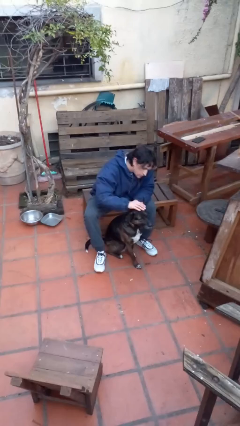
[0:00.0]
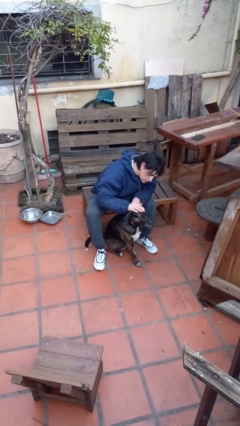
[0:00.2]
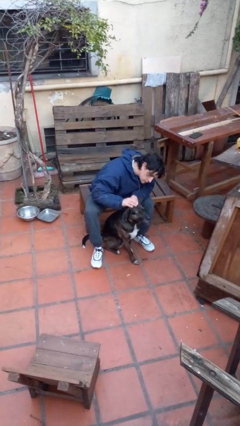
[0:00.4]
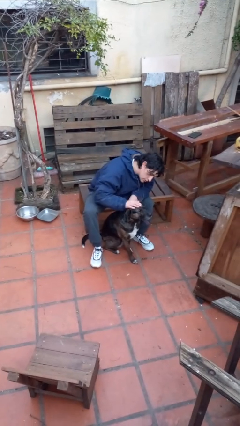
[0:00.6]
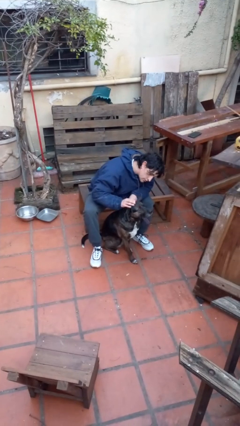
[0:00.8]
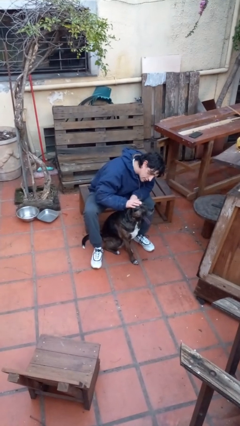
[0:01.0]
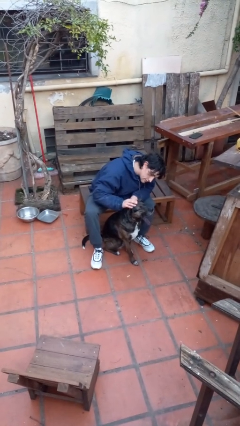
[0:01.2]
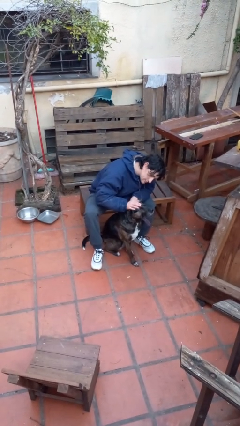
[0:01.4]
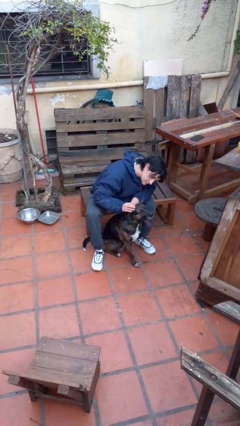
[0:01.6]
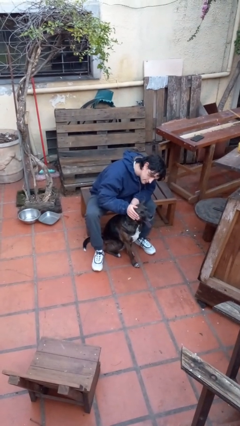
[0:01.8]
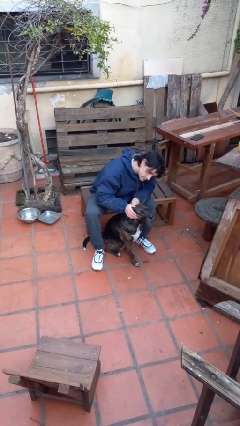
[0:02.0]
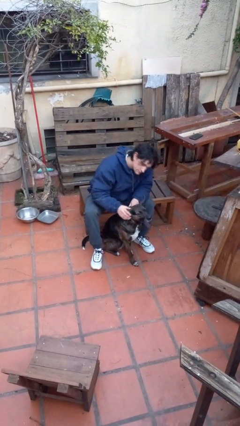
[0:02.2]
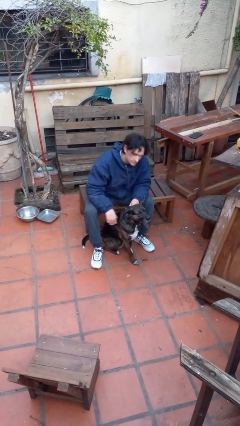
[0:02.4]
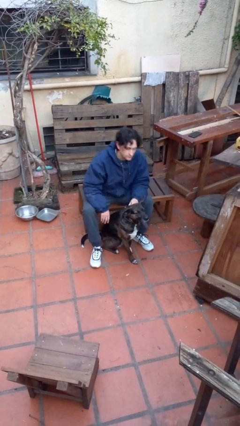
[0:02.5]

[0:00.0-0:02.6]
person pets dog

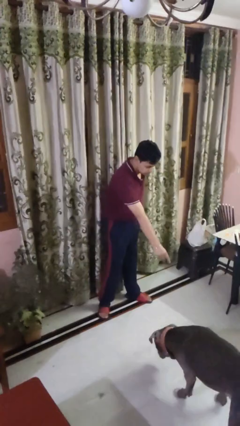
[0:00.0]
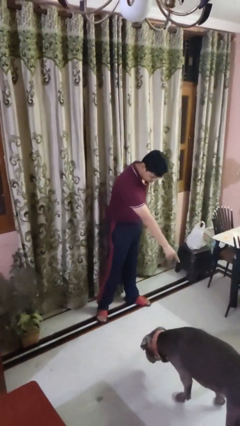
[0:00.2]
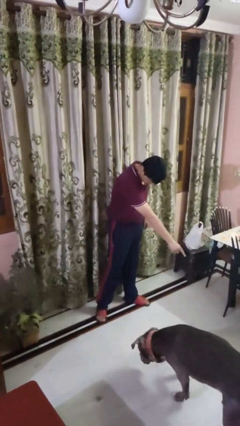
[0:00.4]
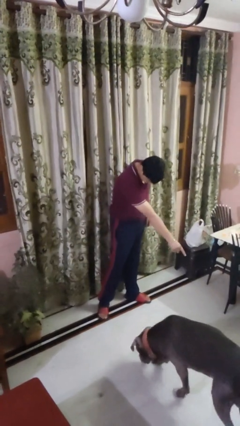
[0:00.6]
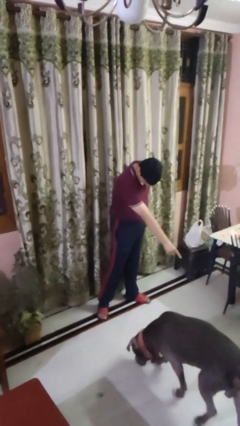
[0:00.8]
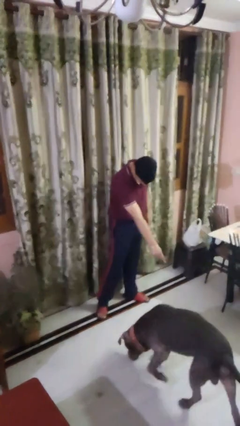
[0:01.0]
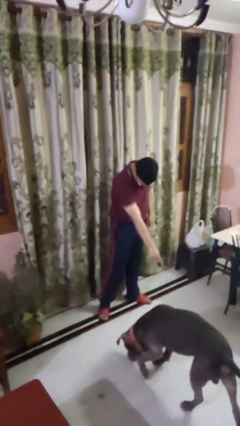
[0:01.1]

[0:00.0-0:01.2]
person points to dog

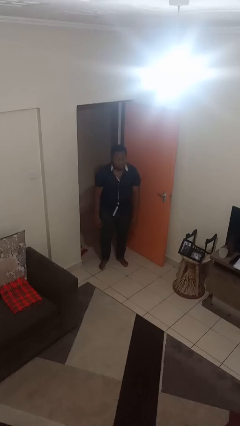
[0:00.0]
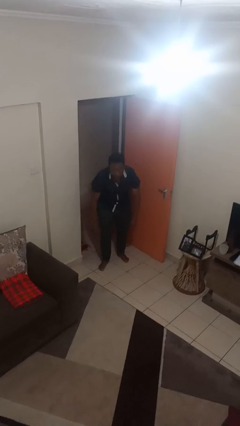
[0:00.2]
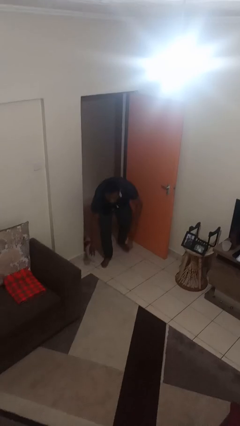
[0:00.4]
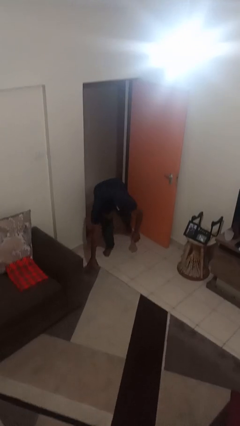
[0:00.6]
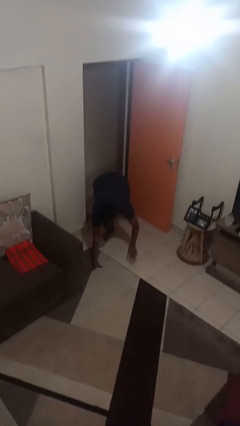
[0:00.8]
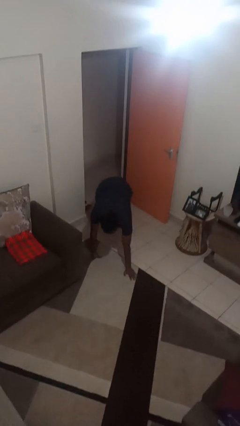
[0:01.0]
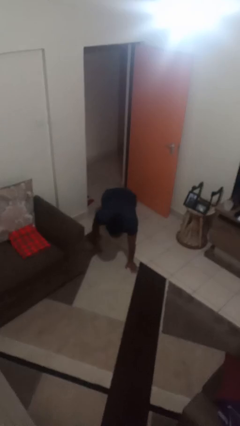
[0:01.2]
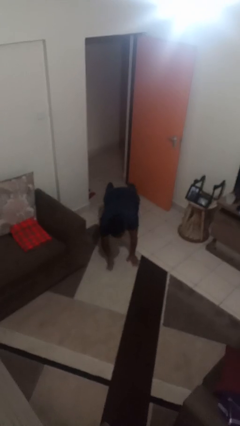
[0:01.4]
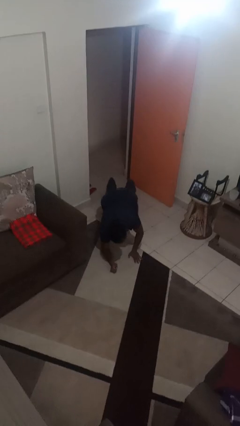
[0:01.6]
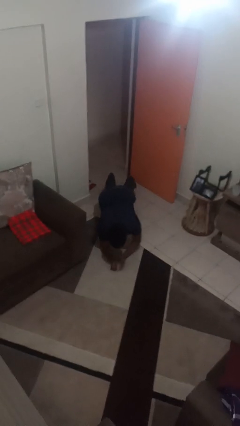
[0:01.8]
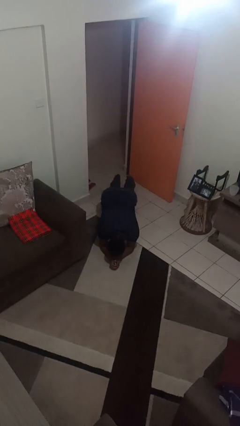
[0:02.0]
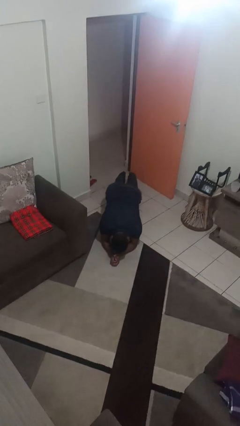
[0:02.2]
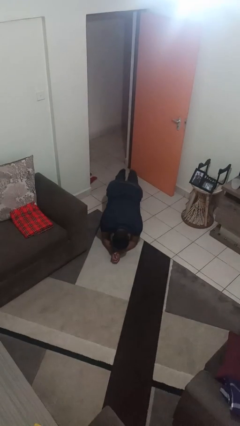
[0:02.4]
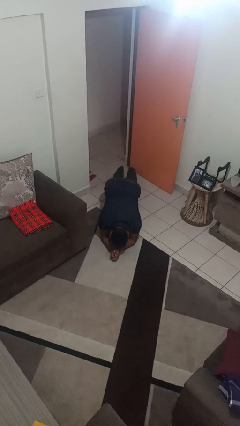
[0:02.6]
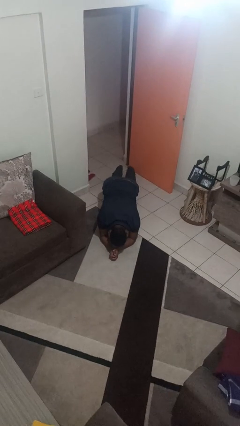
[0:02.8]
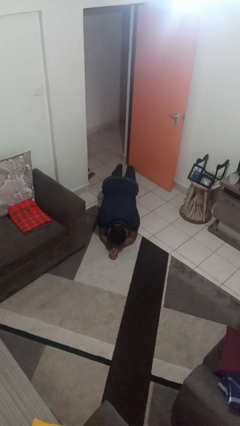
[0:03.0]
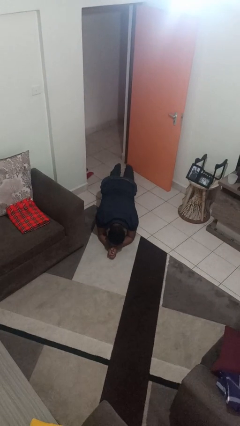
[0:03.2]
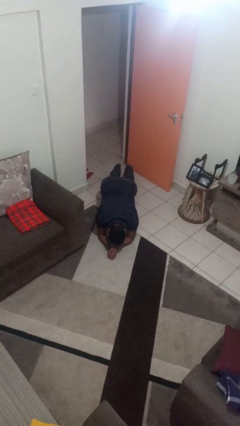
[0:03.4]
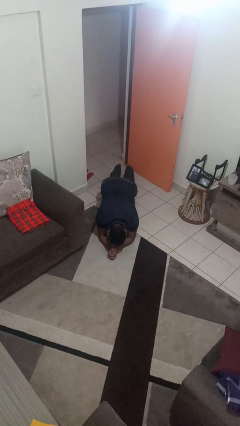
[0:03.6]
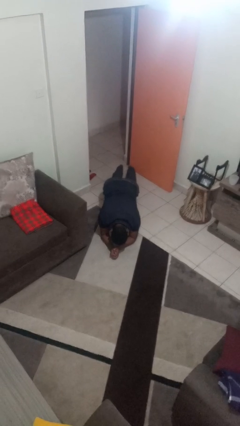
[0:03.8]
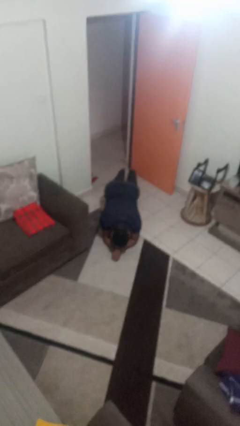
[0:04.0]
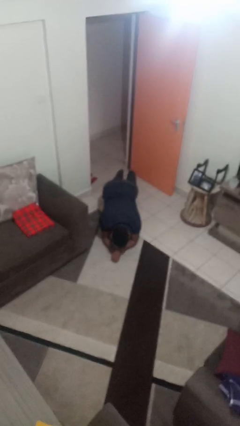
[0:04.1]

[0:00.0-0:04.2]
person exercises with plank

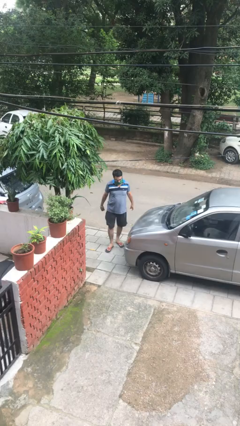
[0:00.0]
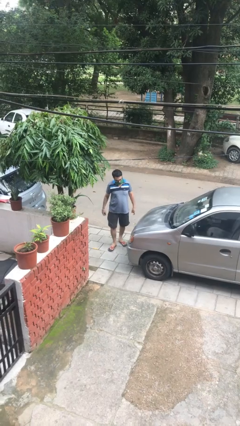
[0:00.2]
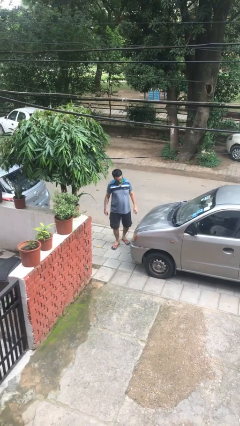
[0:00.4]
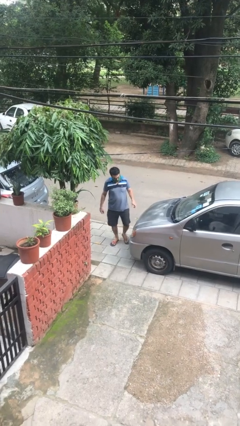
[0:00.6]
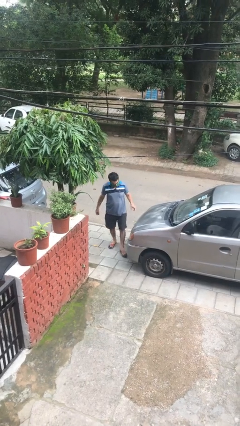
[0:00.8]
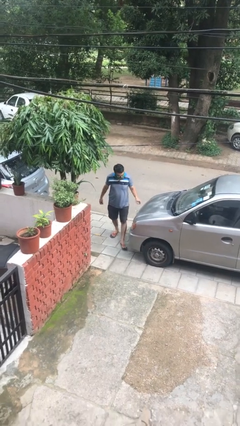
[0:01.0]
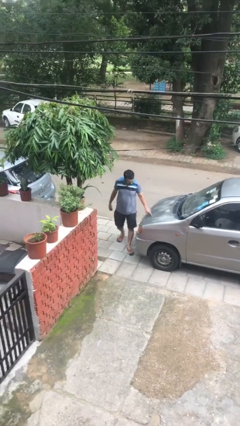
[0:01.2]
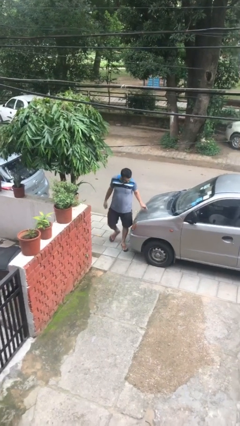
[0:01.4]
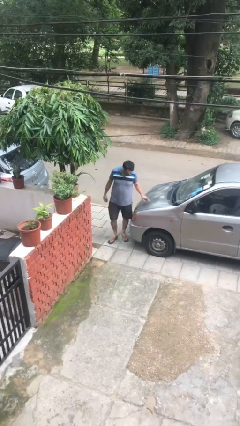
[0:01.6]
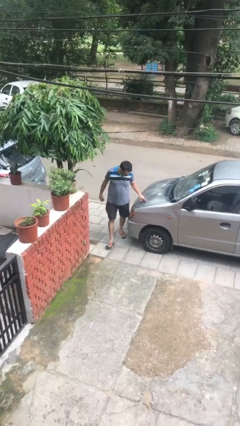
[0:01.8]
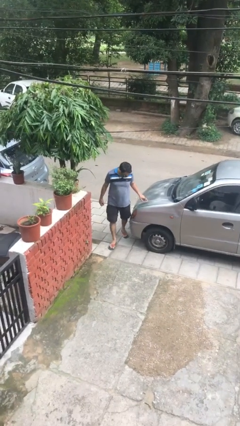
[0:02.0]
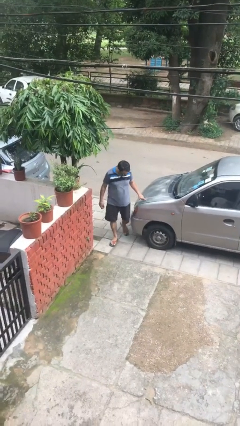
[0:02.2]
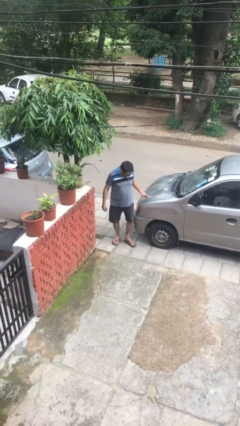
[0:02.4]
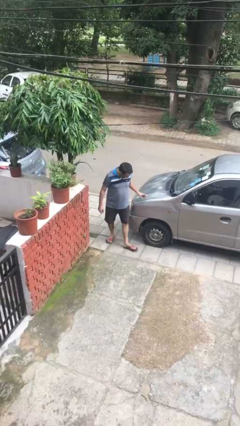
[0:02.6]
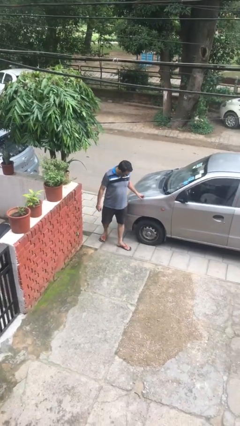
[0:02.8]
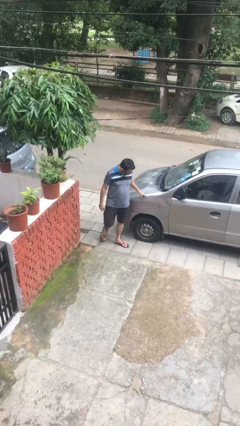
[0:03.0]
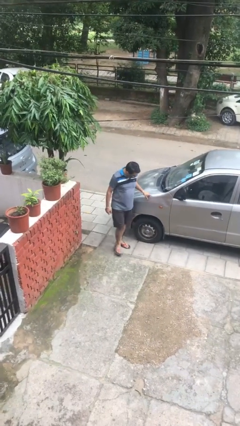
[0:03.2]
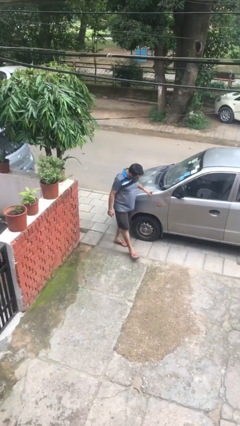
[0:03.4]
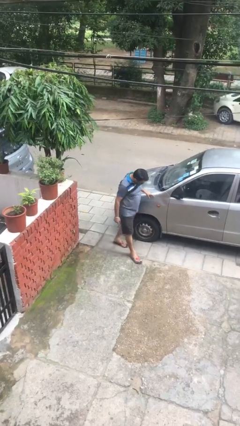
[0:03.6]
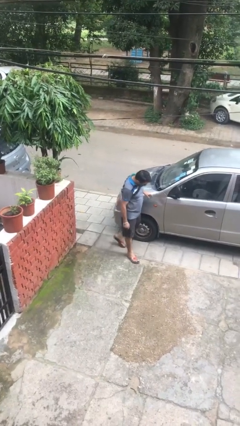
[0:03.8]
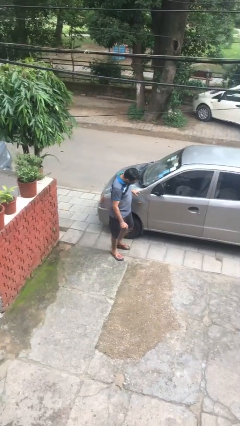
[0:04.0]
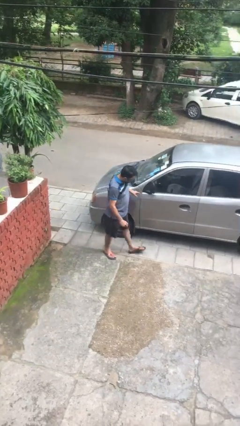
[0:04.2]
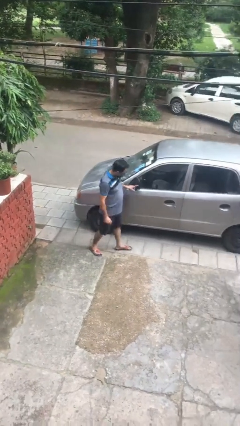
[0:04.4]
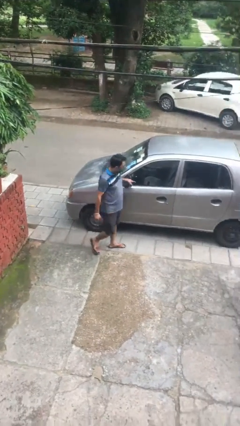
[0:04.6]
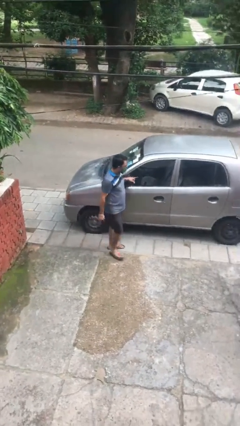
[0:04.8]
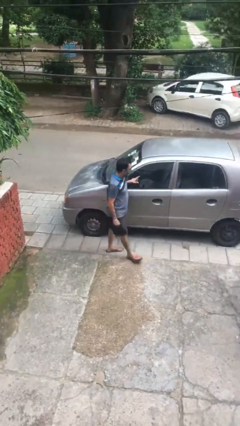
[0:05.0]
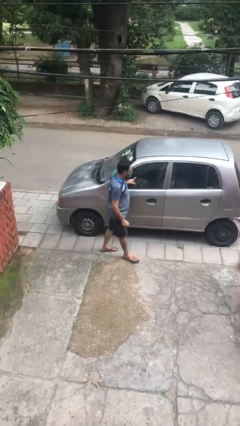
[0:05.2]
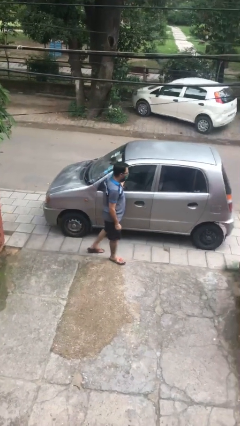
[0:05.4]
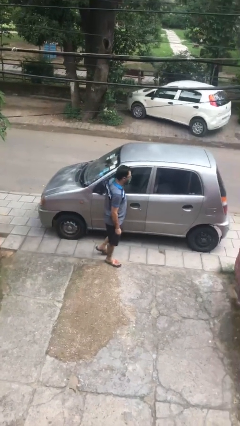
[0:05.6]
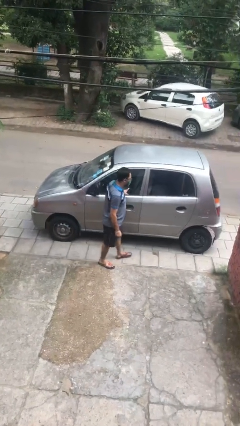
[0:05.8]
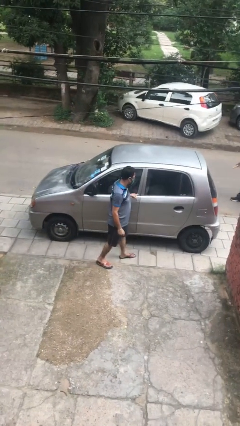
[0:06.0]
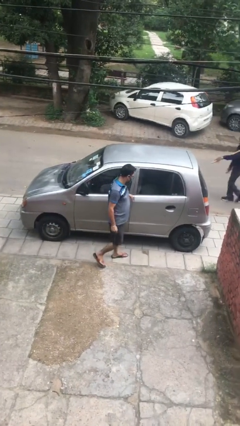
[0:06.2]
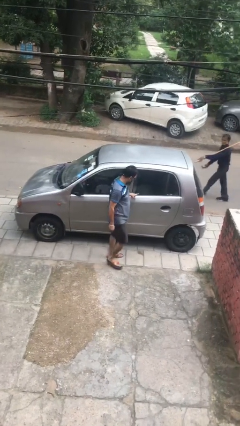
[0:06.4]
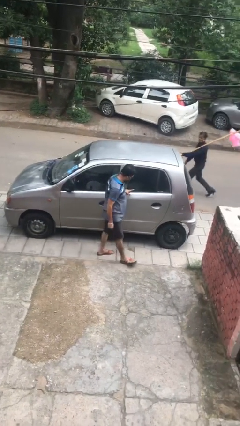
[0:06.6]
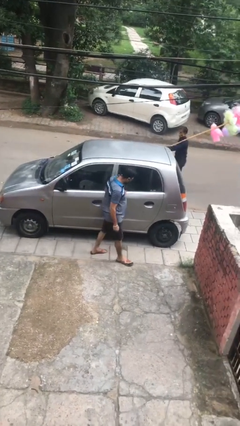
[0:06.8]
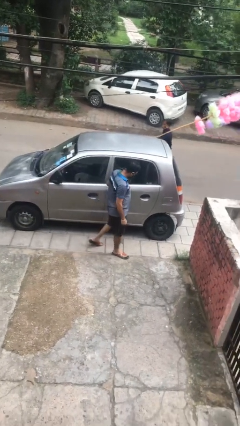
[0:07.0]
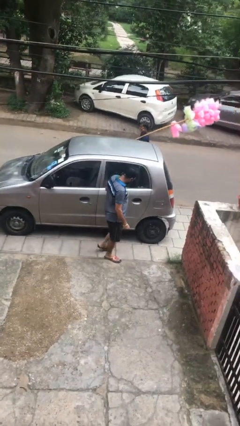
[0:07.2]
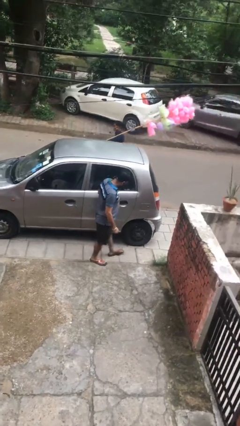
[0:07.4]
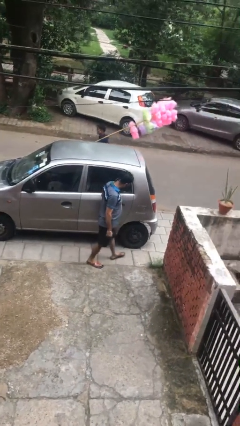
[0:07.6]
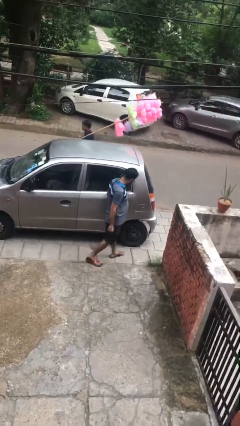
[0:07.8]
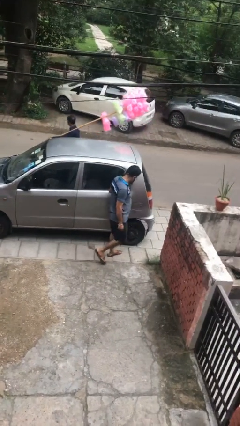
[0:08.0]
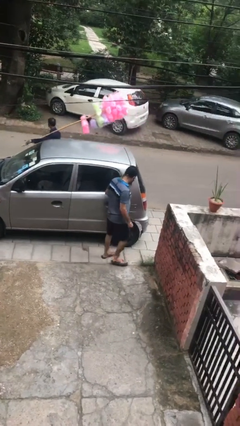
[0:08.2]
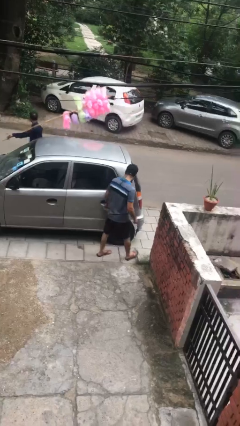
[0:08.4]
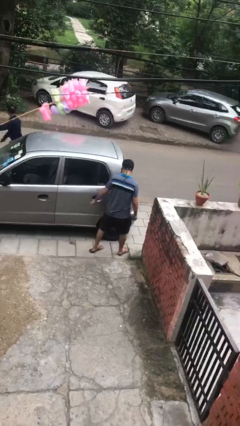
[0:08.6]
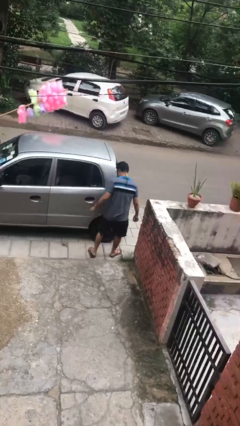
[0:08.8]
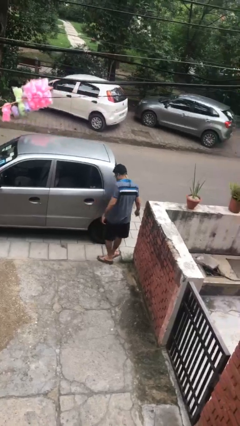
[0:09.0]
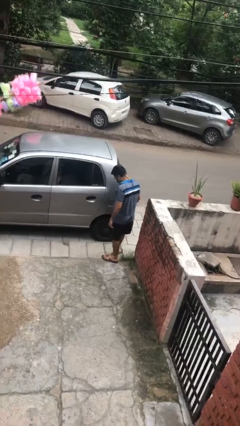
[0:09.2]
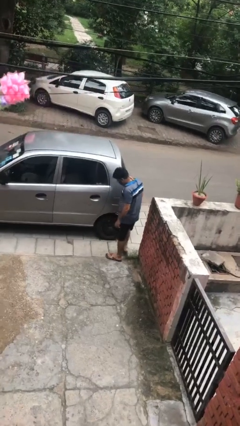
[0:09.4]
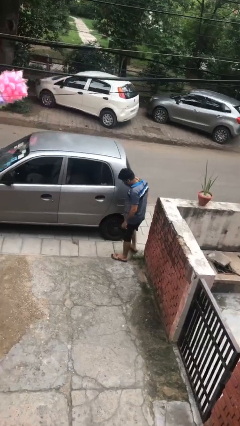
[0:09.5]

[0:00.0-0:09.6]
person walks around car

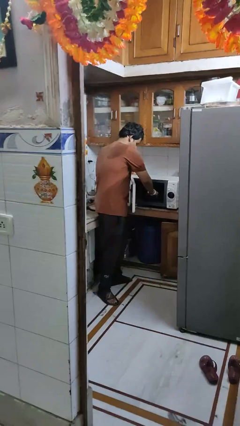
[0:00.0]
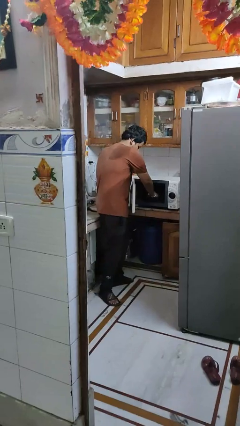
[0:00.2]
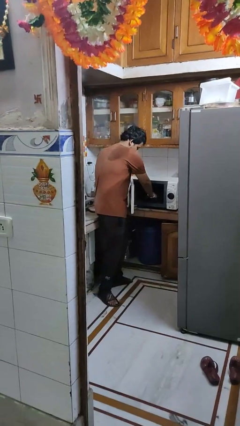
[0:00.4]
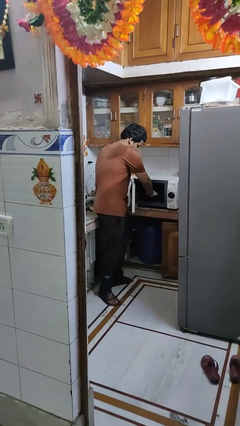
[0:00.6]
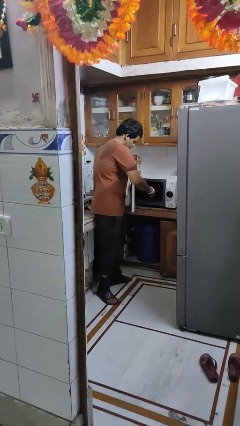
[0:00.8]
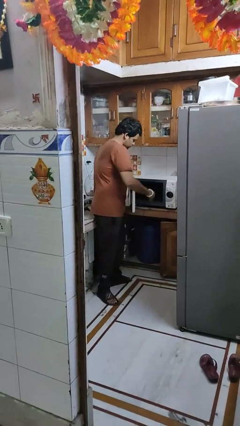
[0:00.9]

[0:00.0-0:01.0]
person puts object into microwave
